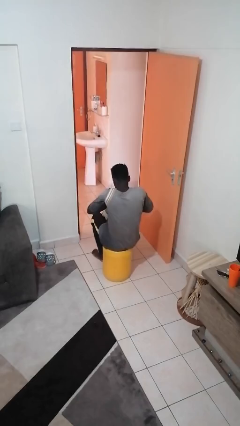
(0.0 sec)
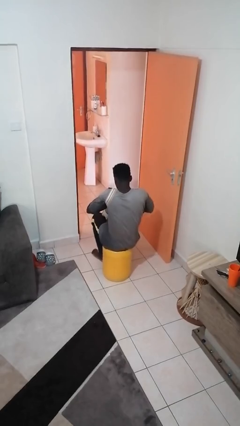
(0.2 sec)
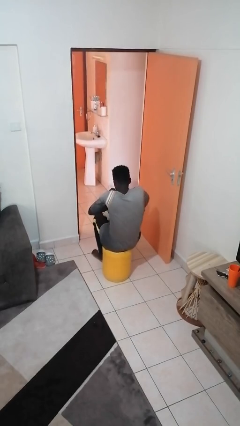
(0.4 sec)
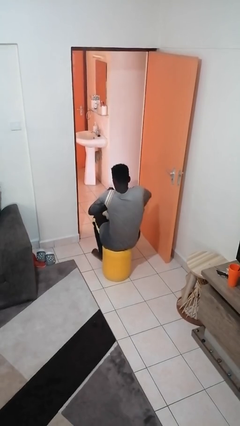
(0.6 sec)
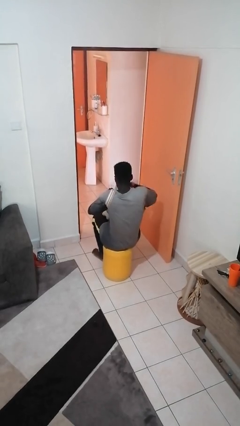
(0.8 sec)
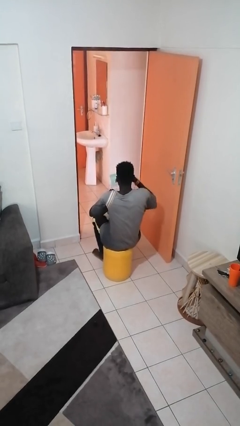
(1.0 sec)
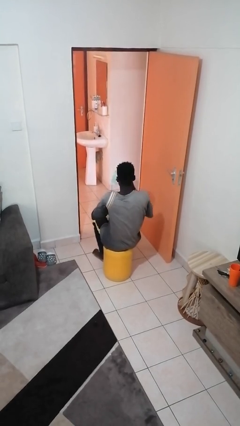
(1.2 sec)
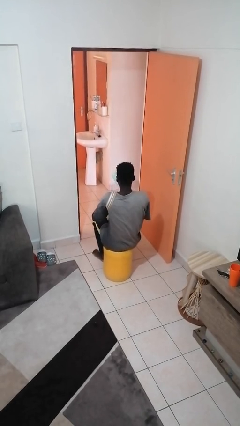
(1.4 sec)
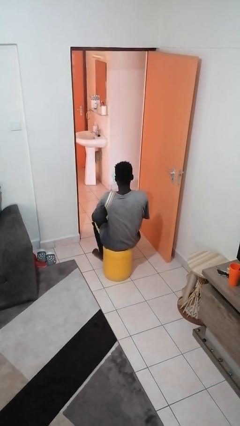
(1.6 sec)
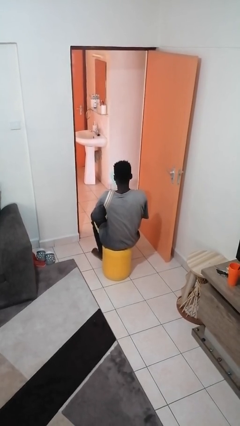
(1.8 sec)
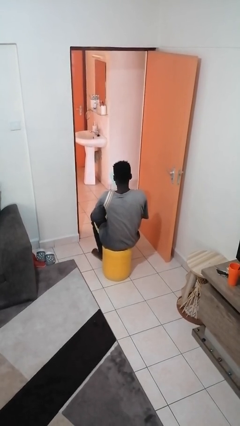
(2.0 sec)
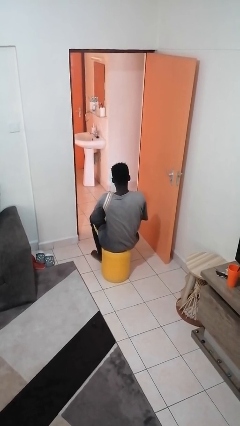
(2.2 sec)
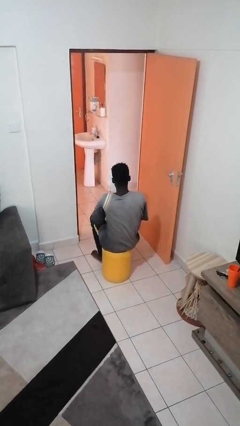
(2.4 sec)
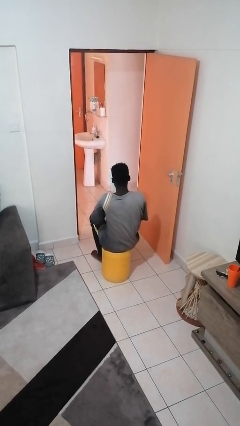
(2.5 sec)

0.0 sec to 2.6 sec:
person takes object from purse

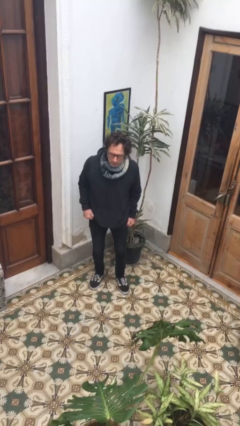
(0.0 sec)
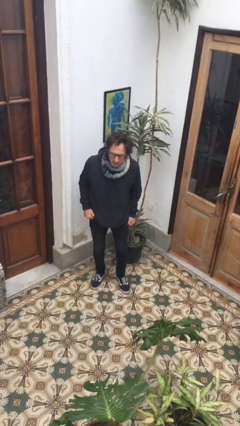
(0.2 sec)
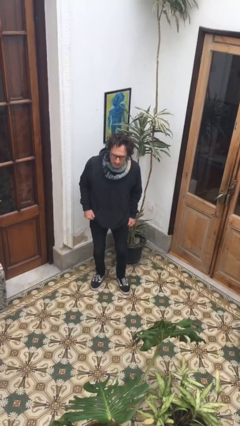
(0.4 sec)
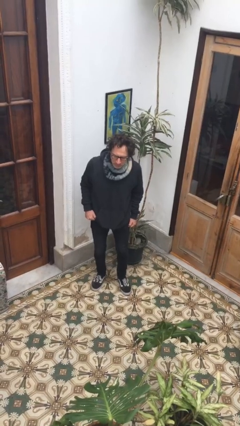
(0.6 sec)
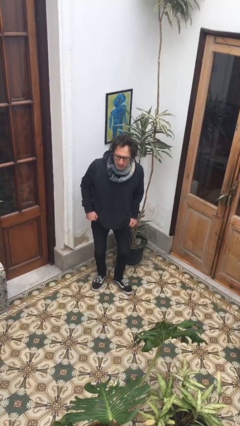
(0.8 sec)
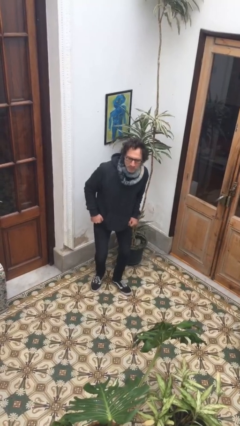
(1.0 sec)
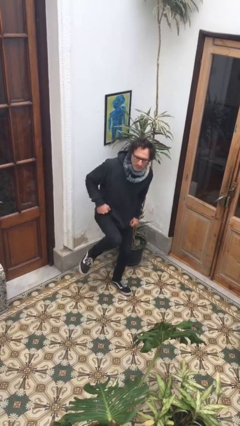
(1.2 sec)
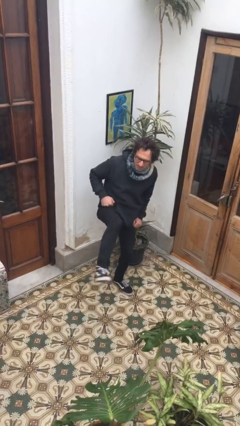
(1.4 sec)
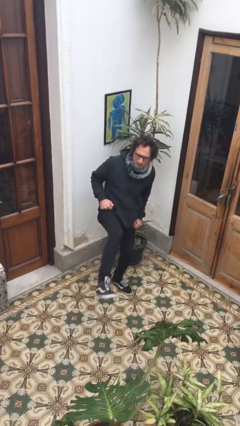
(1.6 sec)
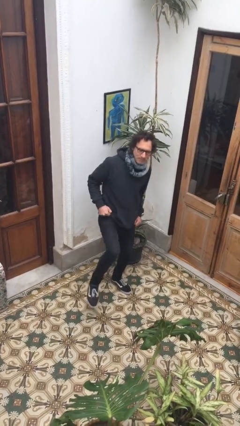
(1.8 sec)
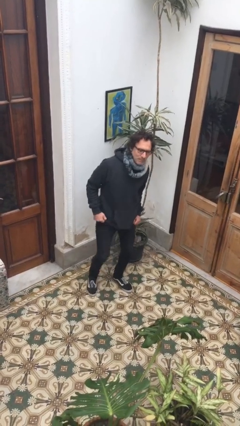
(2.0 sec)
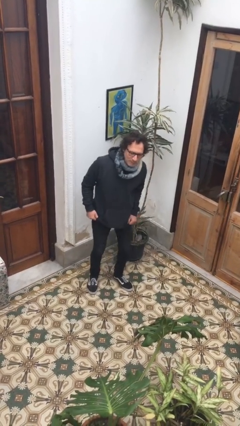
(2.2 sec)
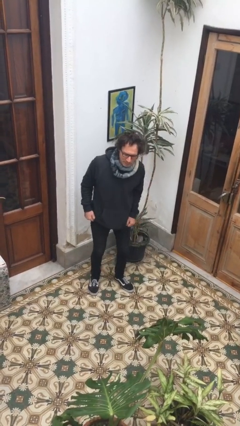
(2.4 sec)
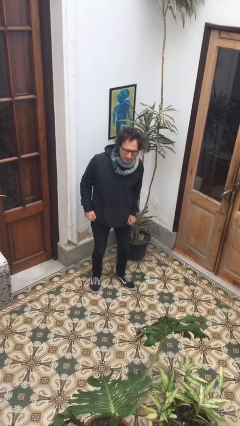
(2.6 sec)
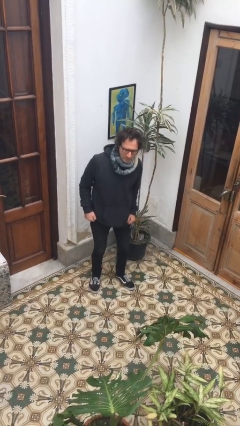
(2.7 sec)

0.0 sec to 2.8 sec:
person karate kicks

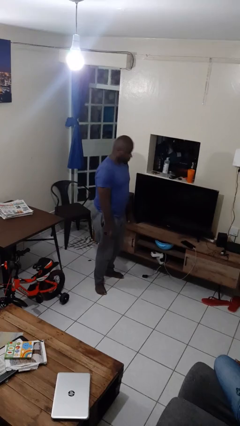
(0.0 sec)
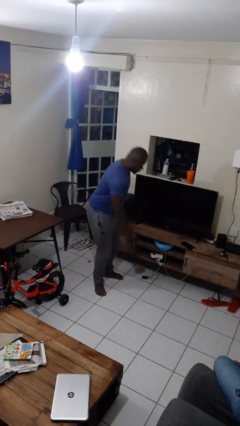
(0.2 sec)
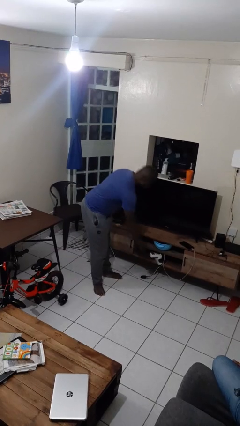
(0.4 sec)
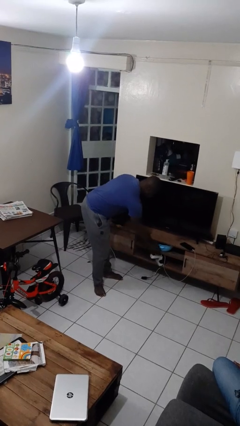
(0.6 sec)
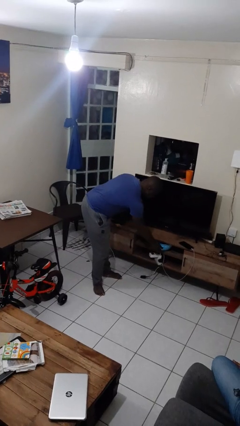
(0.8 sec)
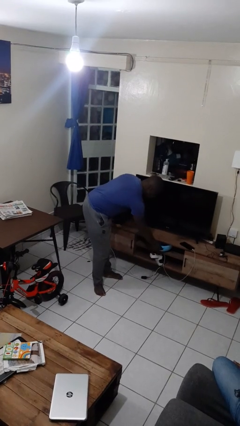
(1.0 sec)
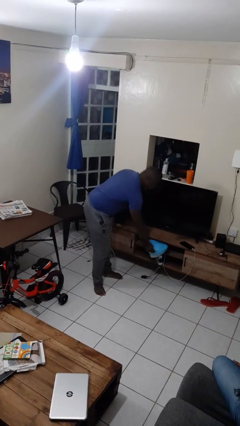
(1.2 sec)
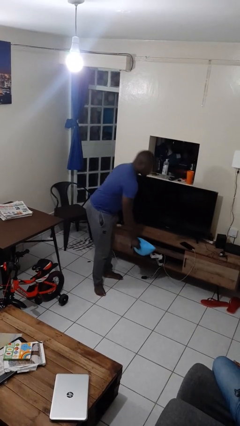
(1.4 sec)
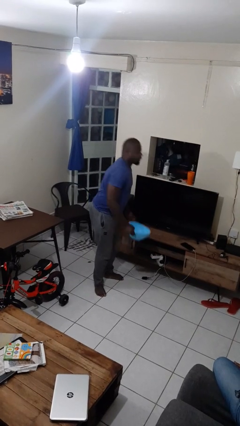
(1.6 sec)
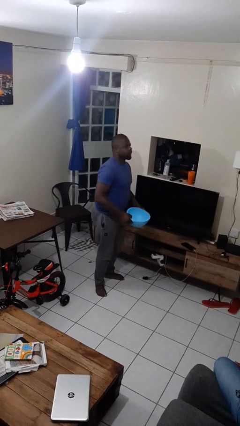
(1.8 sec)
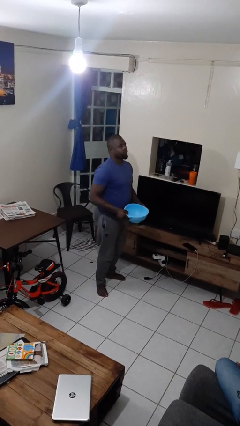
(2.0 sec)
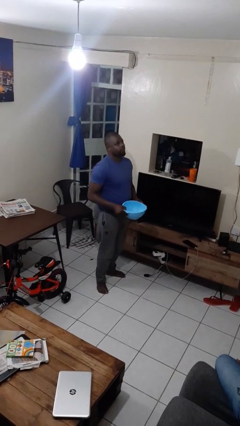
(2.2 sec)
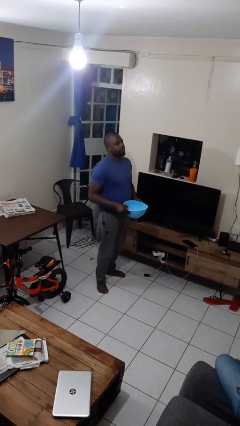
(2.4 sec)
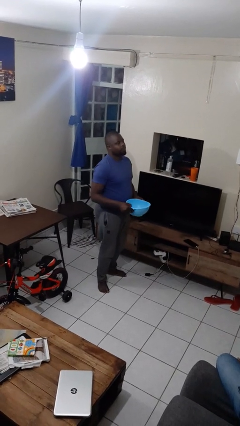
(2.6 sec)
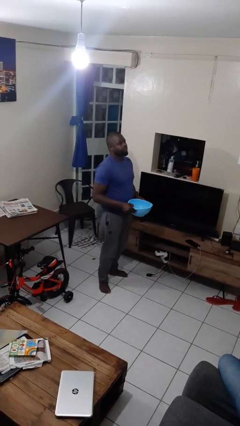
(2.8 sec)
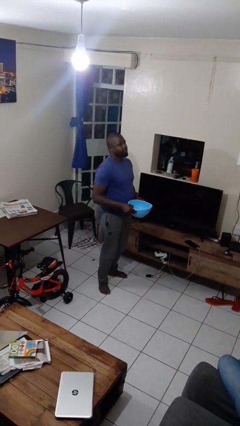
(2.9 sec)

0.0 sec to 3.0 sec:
person picks up object from cabinet

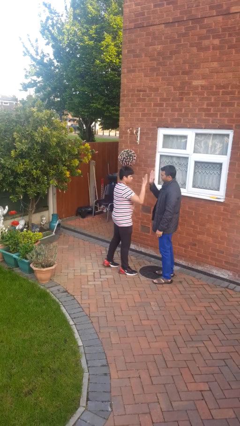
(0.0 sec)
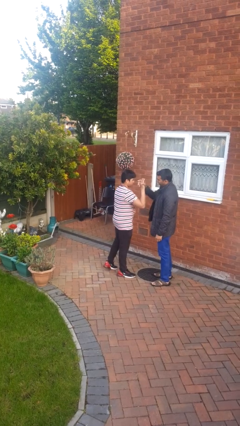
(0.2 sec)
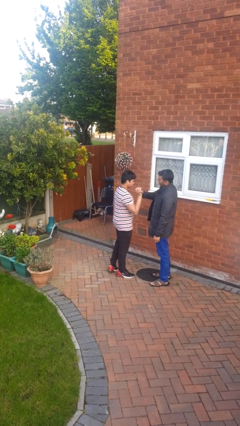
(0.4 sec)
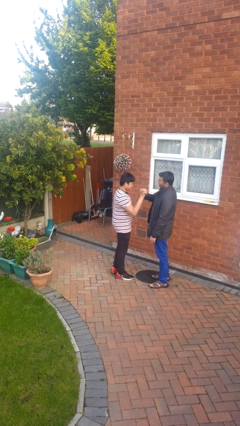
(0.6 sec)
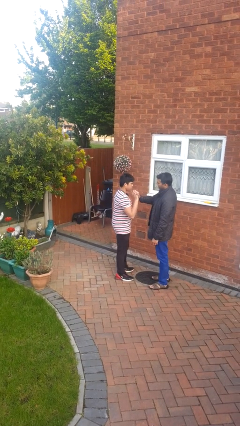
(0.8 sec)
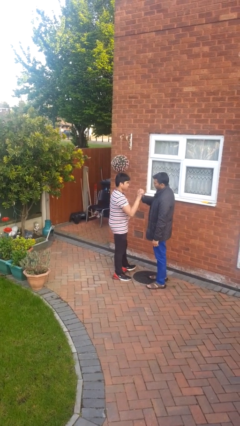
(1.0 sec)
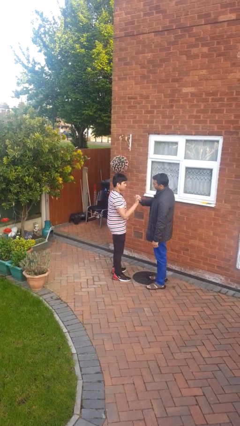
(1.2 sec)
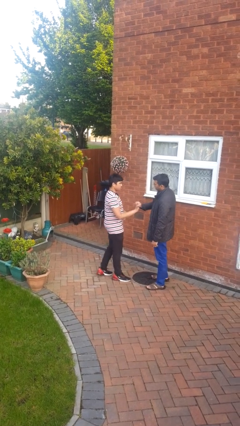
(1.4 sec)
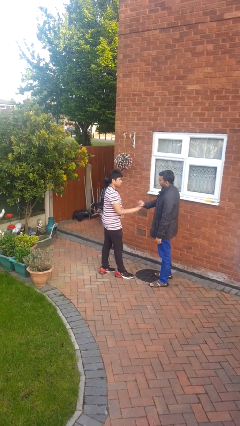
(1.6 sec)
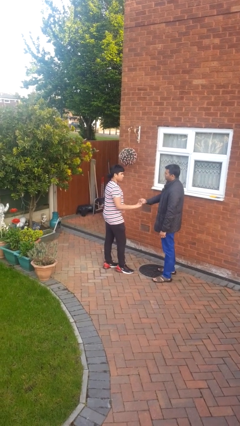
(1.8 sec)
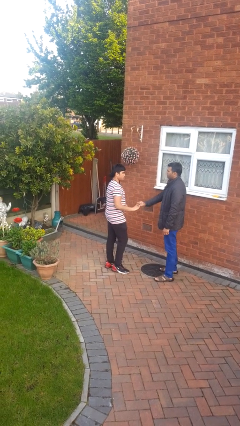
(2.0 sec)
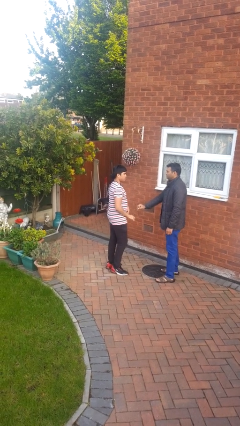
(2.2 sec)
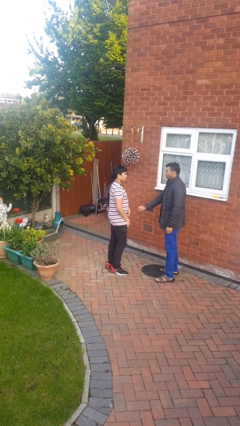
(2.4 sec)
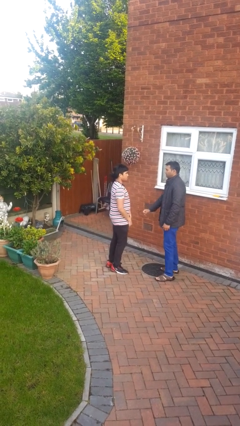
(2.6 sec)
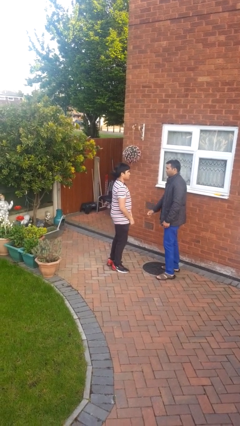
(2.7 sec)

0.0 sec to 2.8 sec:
person highfives hand

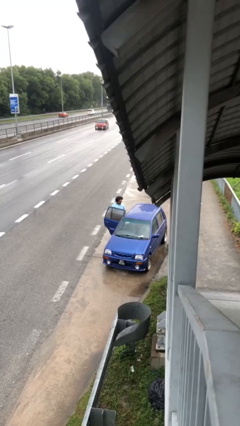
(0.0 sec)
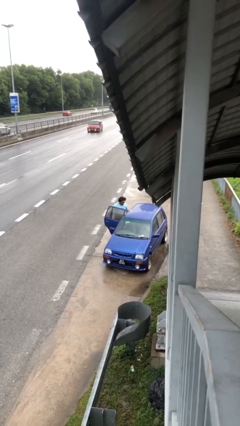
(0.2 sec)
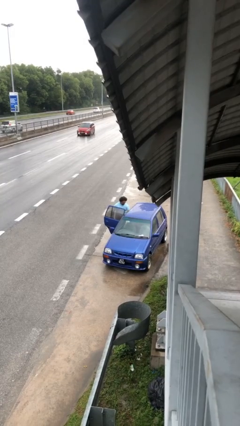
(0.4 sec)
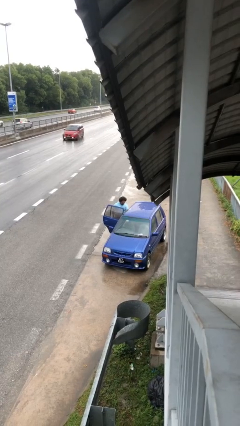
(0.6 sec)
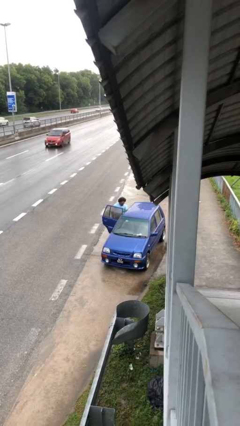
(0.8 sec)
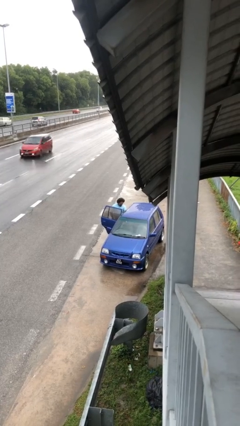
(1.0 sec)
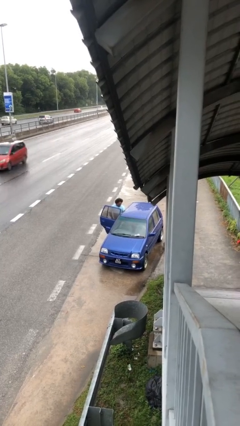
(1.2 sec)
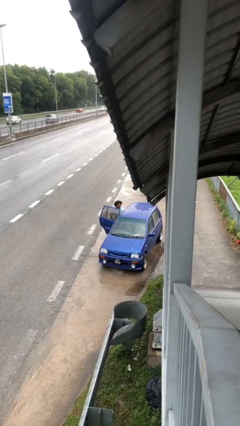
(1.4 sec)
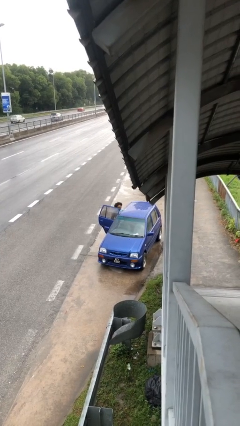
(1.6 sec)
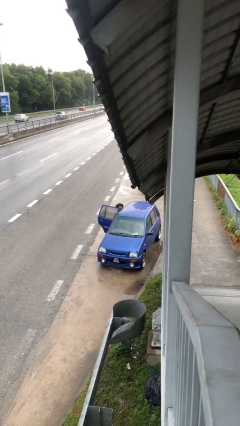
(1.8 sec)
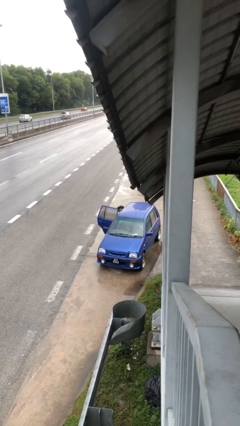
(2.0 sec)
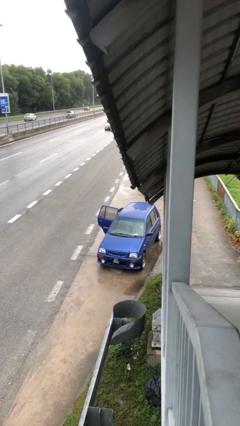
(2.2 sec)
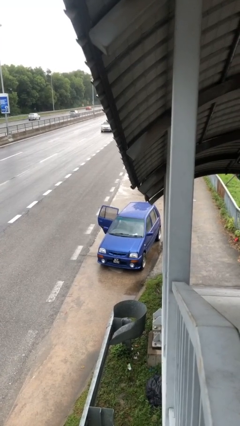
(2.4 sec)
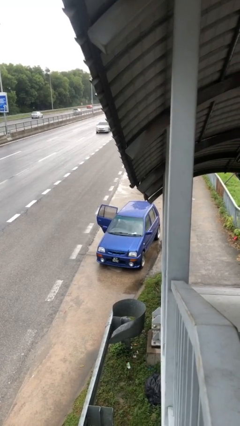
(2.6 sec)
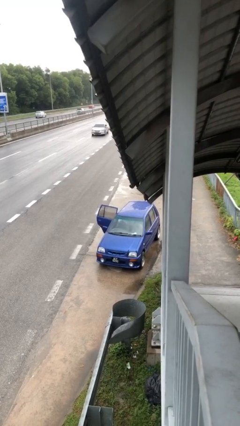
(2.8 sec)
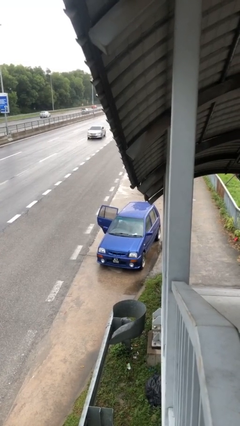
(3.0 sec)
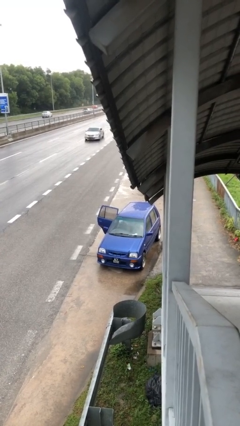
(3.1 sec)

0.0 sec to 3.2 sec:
person enters car

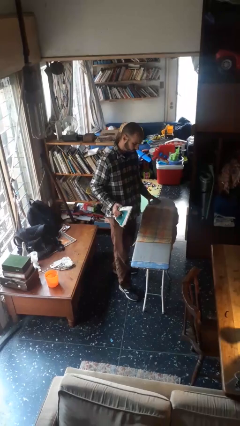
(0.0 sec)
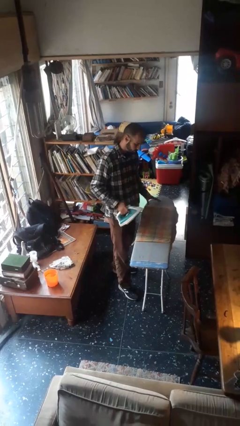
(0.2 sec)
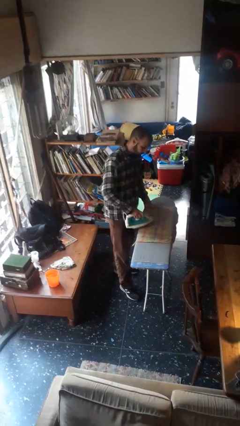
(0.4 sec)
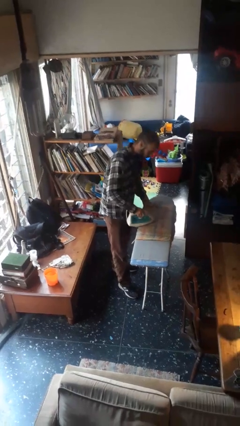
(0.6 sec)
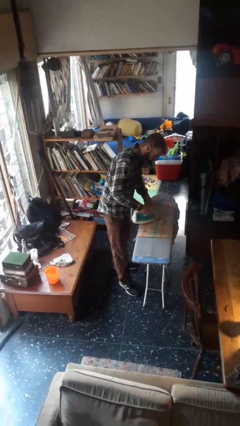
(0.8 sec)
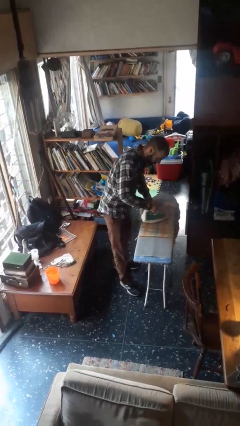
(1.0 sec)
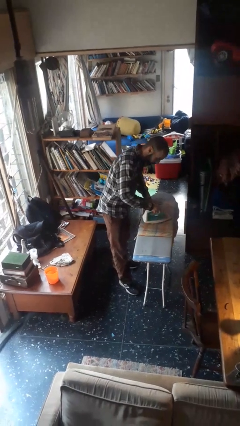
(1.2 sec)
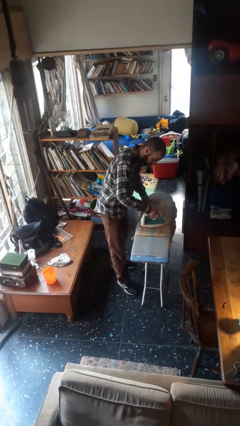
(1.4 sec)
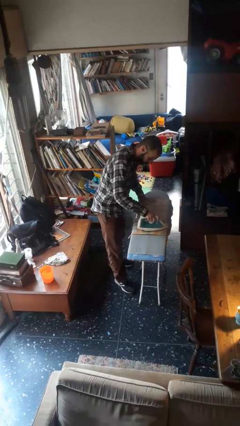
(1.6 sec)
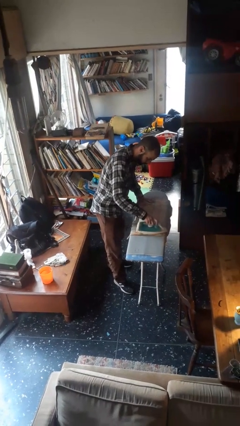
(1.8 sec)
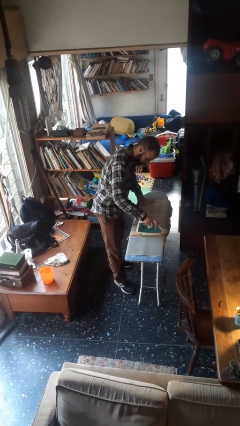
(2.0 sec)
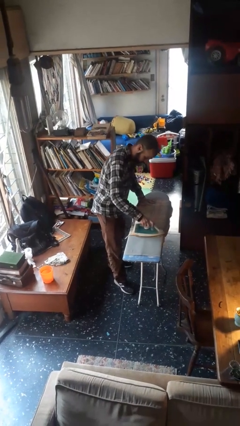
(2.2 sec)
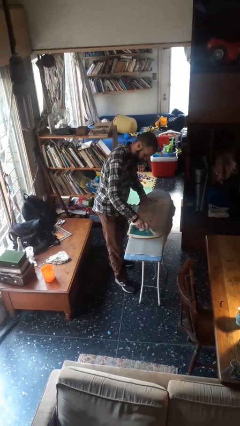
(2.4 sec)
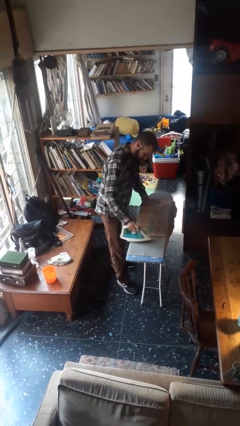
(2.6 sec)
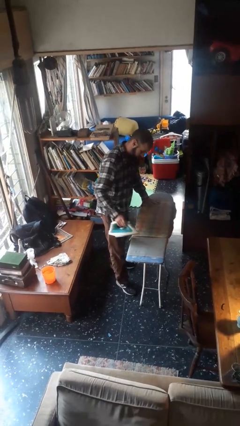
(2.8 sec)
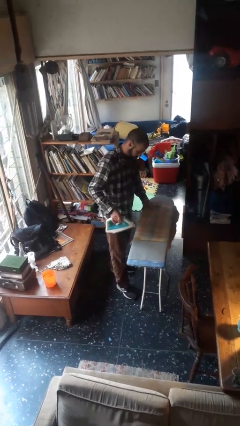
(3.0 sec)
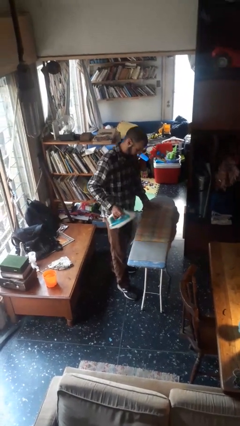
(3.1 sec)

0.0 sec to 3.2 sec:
person irons clothes
